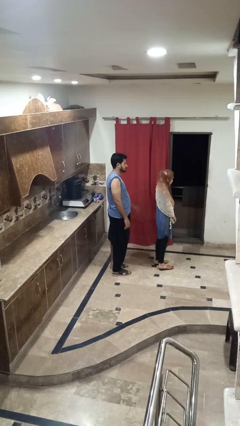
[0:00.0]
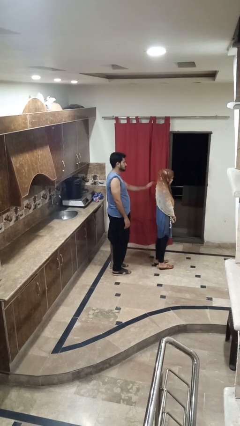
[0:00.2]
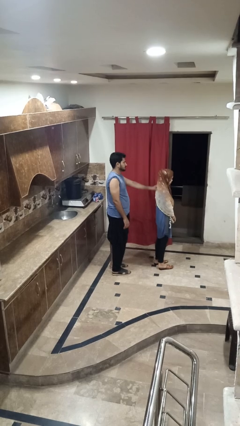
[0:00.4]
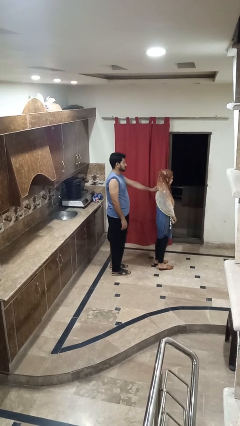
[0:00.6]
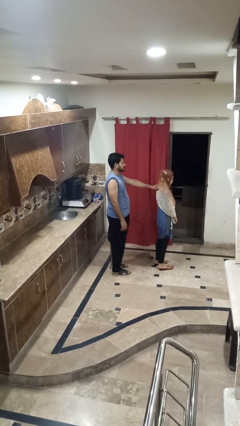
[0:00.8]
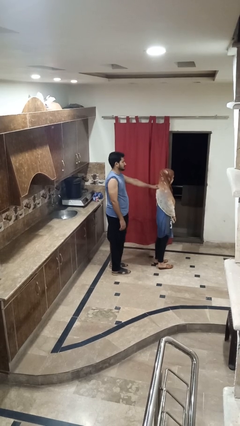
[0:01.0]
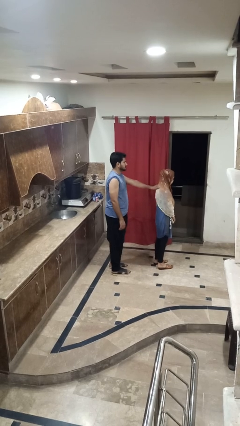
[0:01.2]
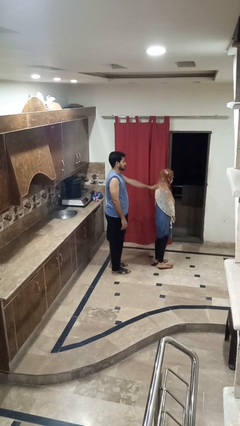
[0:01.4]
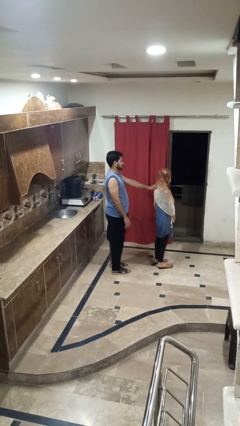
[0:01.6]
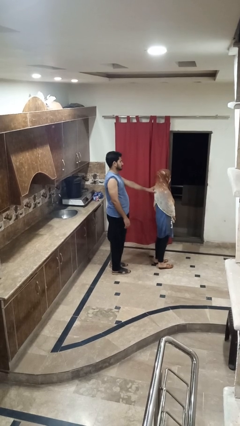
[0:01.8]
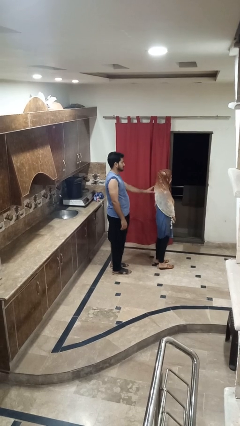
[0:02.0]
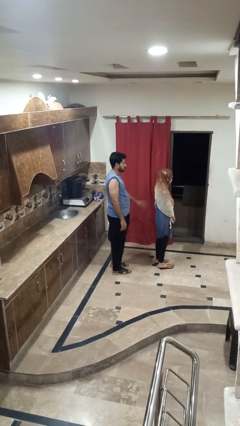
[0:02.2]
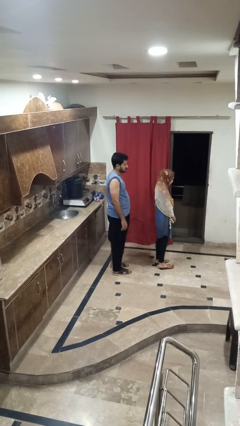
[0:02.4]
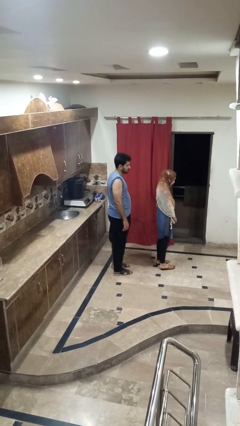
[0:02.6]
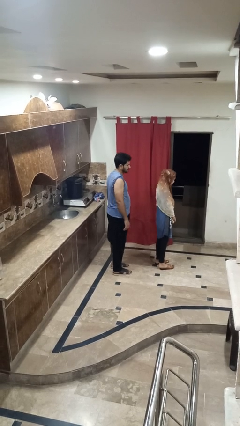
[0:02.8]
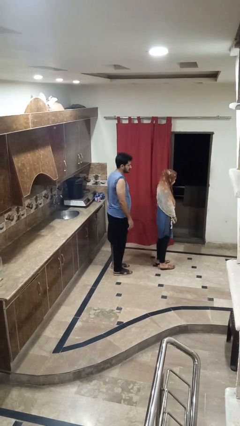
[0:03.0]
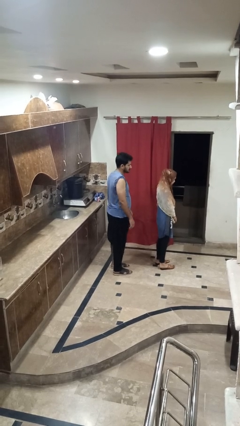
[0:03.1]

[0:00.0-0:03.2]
person touches back of person

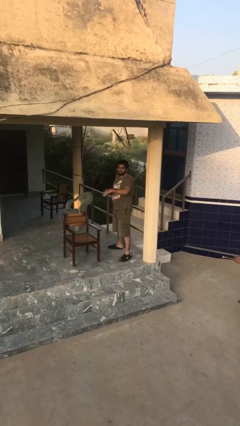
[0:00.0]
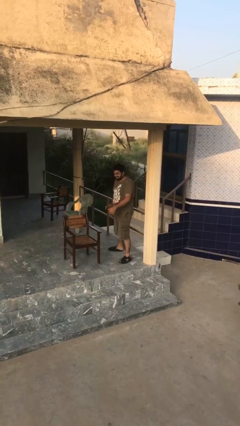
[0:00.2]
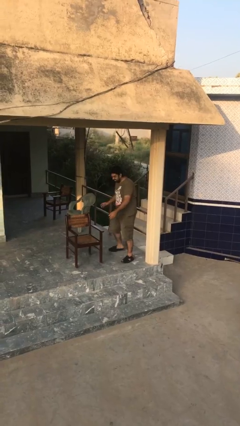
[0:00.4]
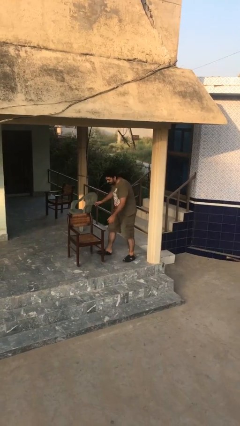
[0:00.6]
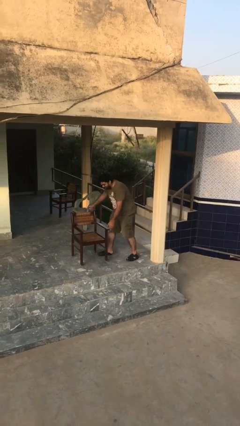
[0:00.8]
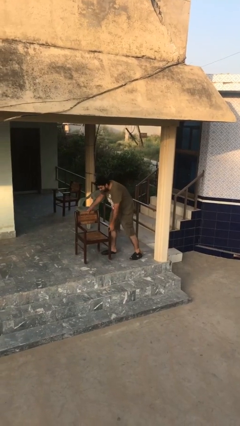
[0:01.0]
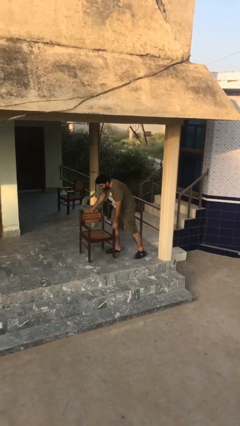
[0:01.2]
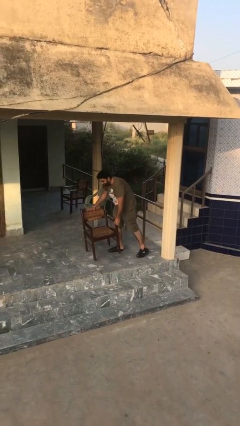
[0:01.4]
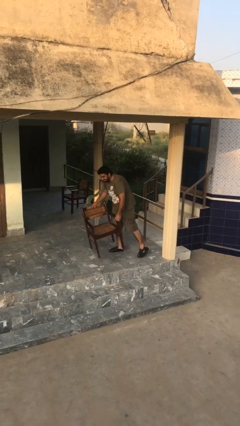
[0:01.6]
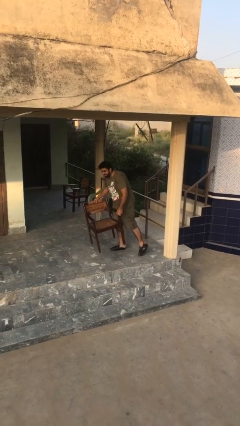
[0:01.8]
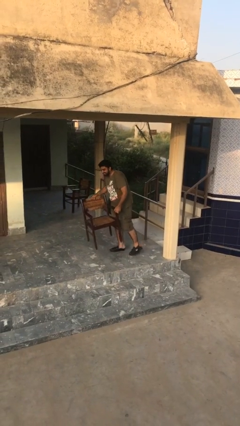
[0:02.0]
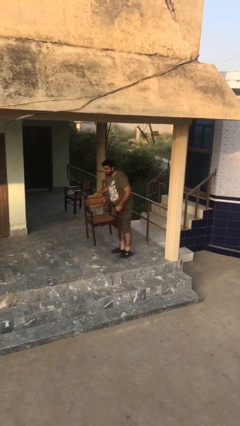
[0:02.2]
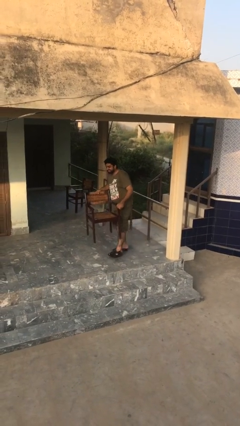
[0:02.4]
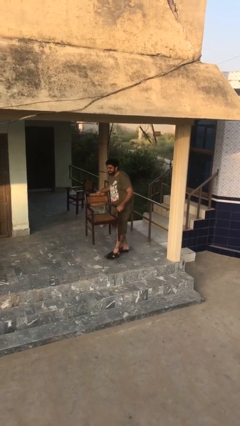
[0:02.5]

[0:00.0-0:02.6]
person picks up object from floor

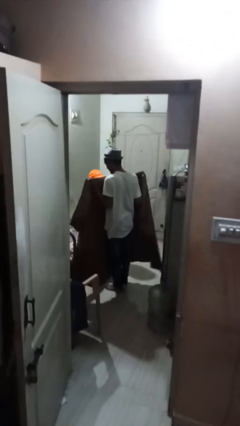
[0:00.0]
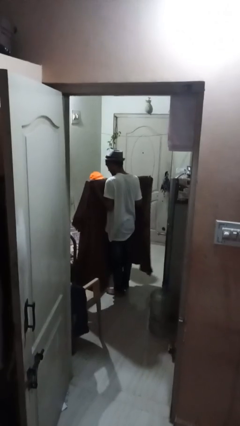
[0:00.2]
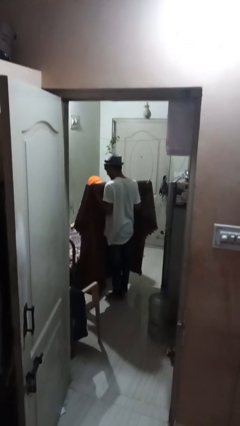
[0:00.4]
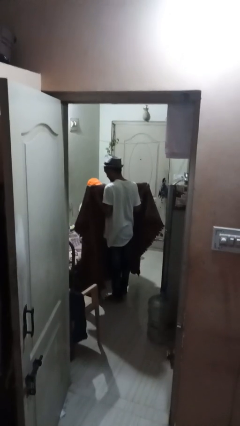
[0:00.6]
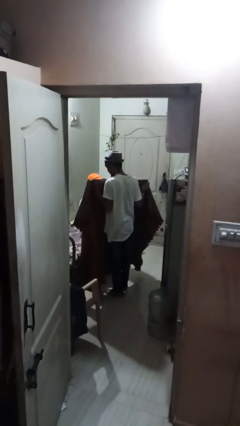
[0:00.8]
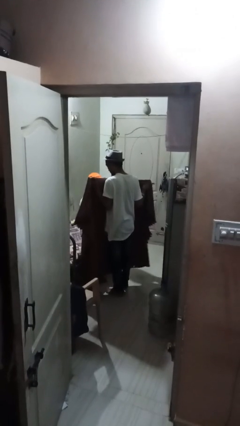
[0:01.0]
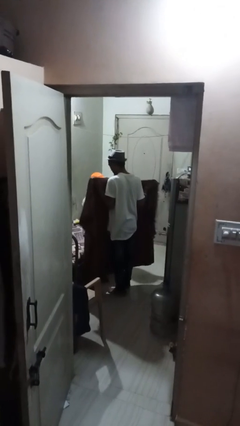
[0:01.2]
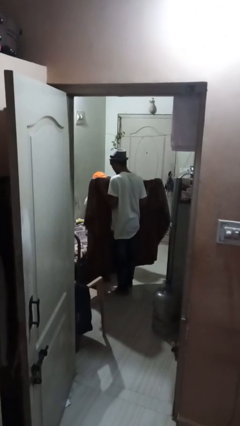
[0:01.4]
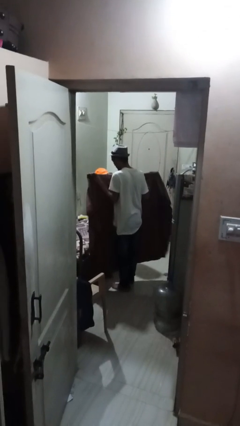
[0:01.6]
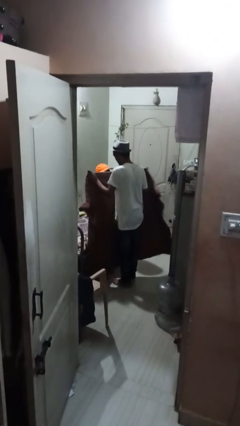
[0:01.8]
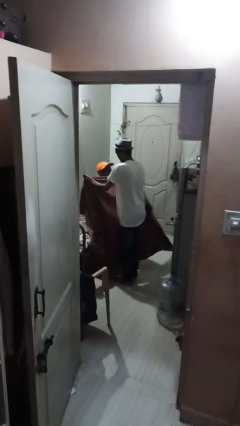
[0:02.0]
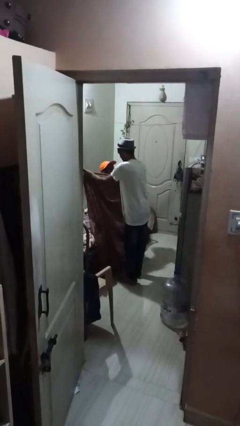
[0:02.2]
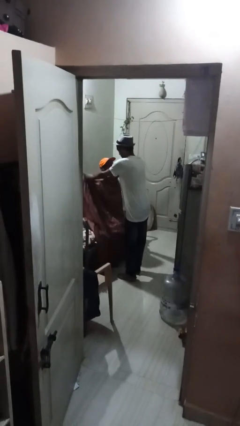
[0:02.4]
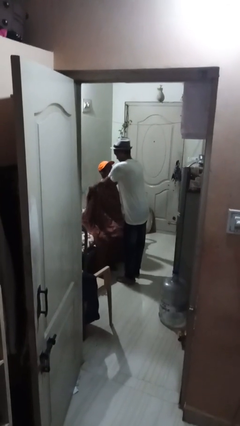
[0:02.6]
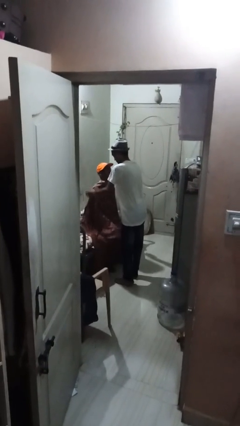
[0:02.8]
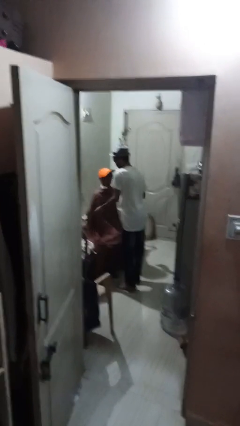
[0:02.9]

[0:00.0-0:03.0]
person uncovers friend with blanket

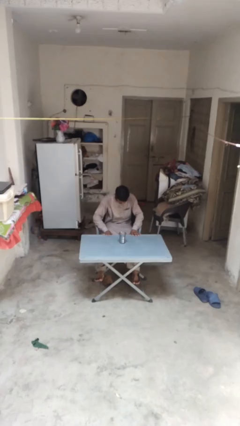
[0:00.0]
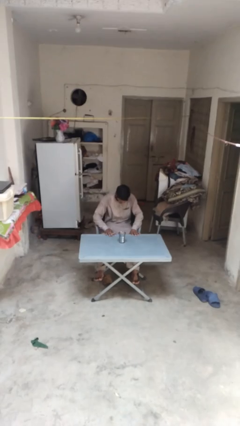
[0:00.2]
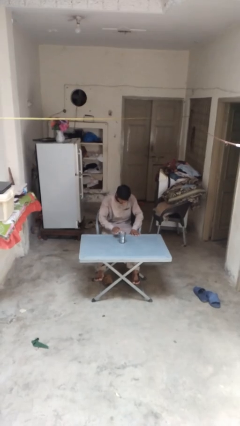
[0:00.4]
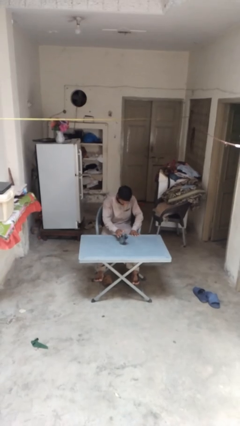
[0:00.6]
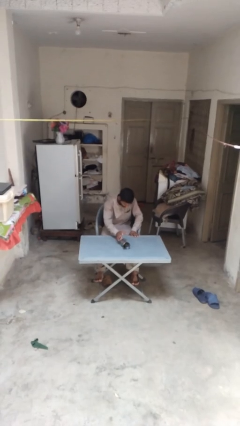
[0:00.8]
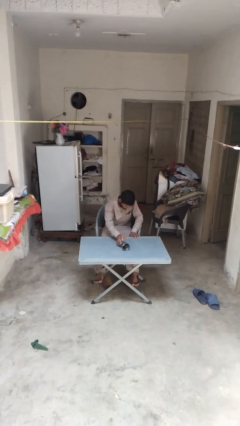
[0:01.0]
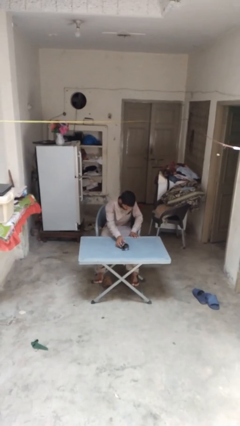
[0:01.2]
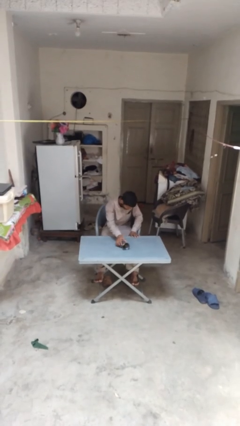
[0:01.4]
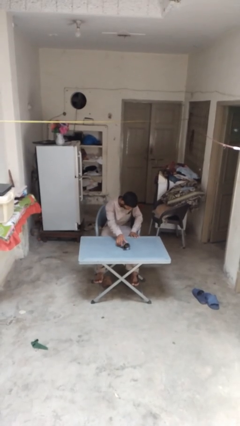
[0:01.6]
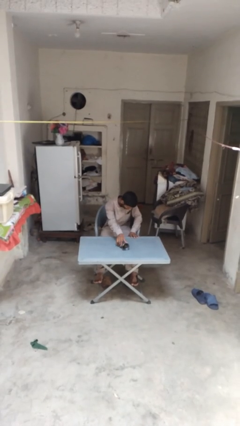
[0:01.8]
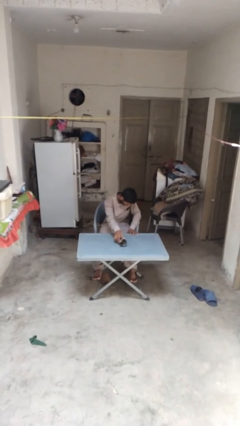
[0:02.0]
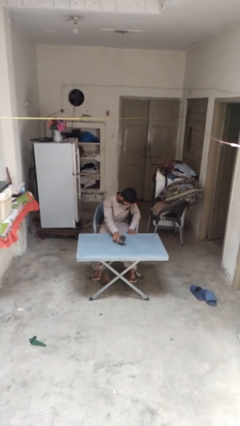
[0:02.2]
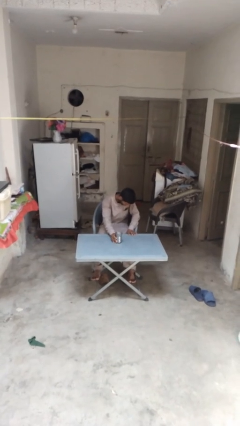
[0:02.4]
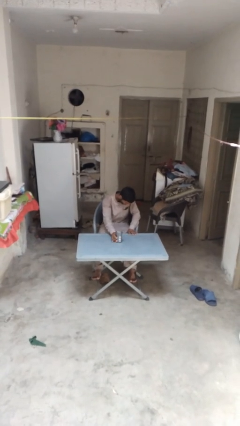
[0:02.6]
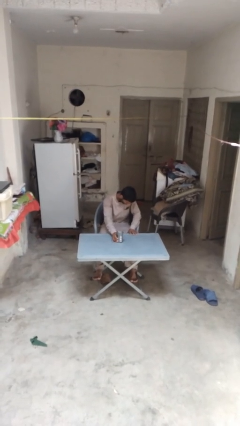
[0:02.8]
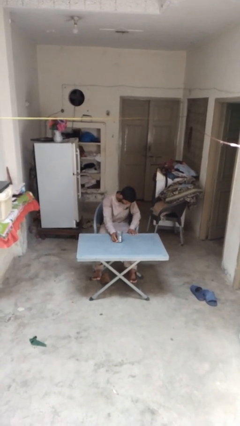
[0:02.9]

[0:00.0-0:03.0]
person knocks over glass

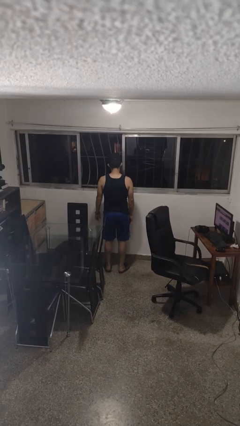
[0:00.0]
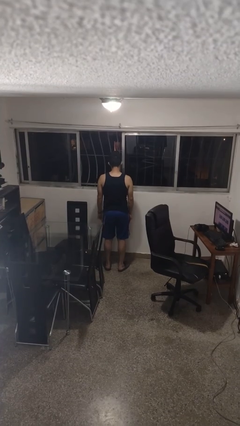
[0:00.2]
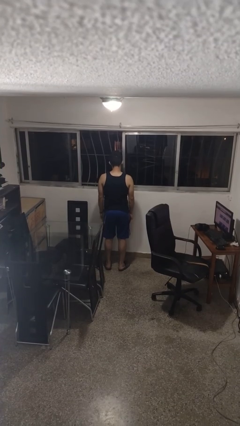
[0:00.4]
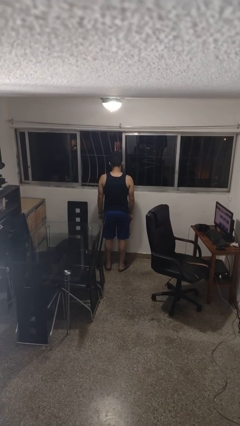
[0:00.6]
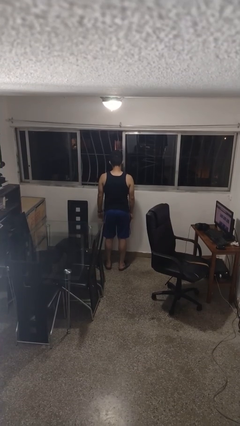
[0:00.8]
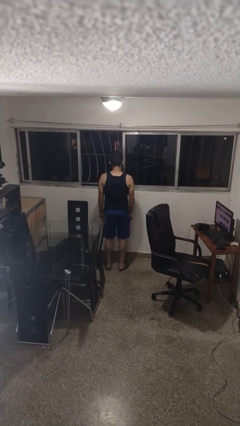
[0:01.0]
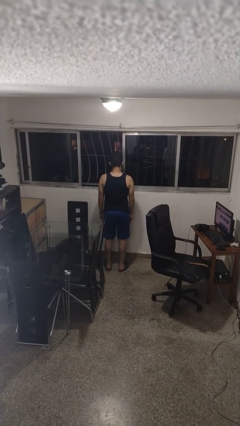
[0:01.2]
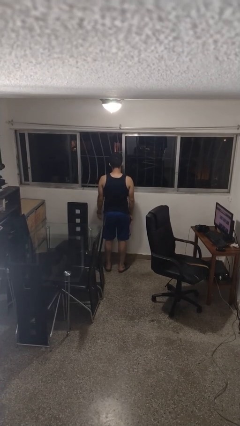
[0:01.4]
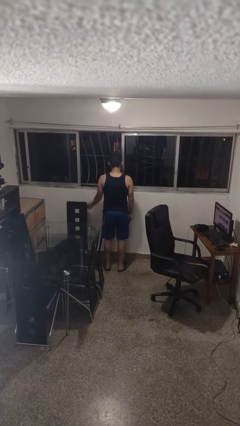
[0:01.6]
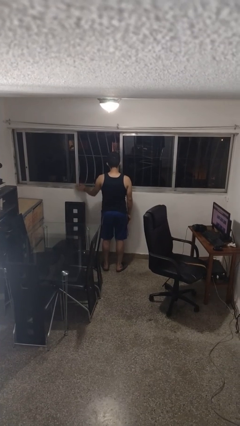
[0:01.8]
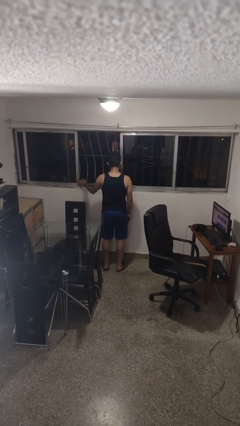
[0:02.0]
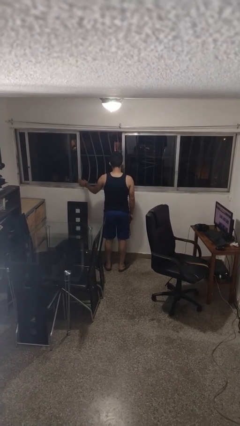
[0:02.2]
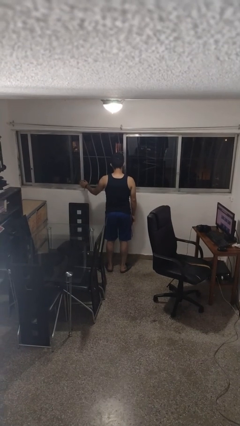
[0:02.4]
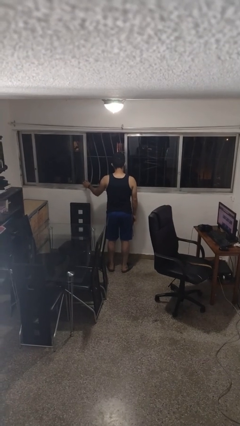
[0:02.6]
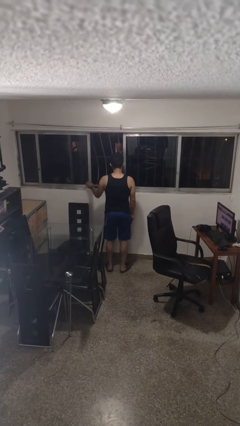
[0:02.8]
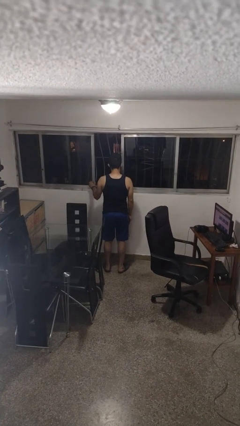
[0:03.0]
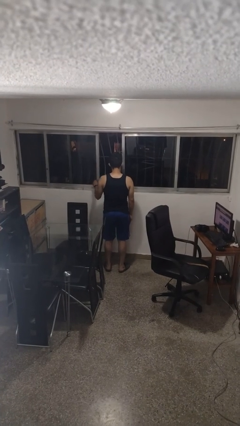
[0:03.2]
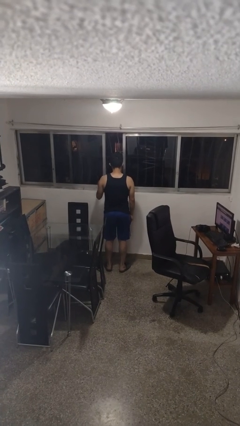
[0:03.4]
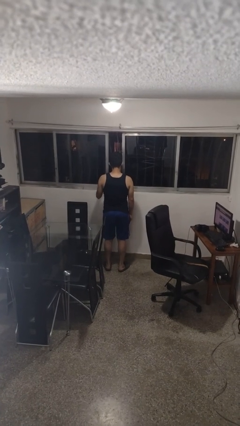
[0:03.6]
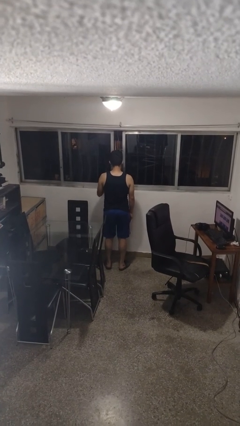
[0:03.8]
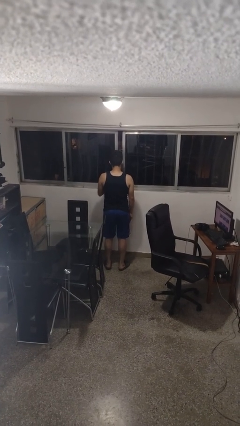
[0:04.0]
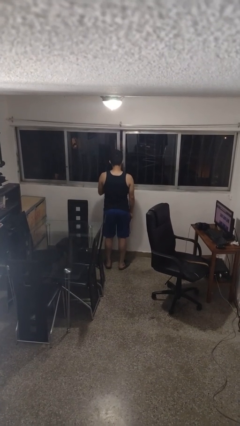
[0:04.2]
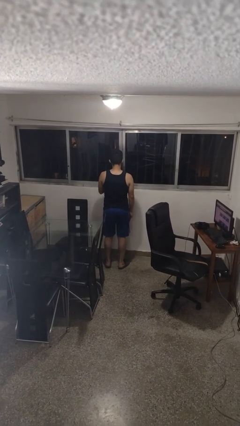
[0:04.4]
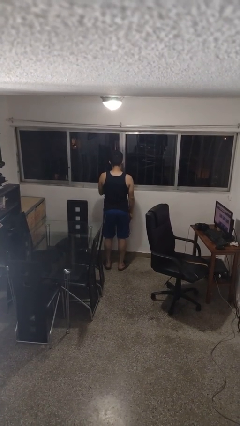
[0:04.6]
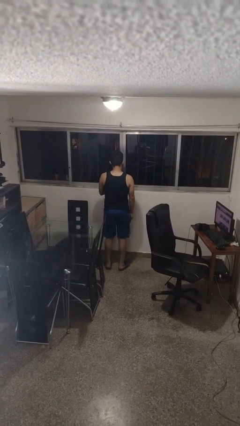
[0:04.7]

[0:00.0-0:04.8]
person closes home window

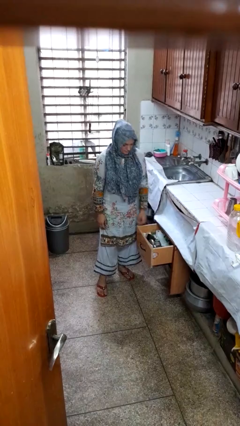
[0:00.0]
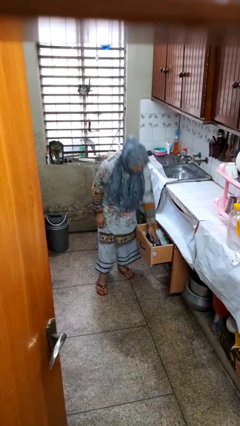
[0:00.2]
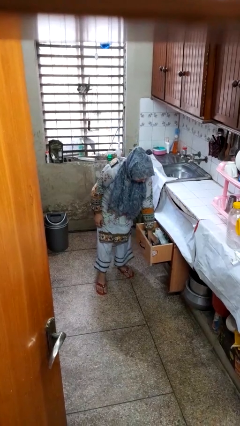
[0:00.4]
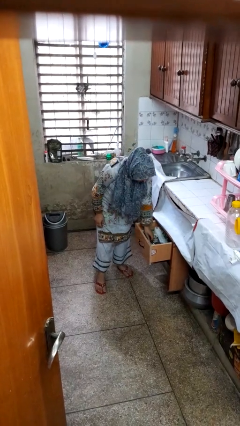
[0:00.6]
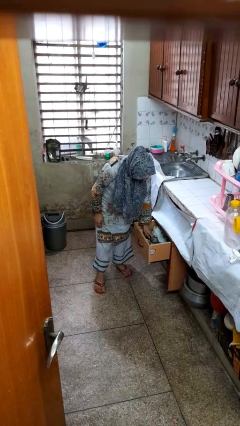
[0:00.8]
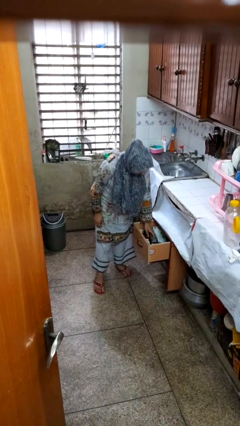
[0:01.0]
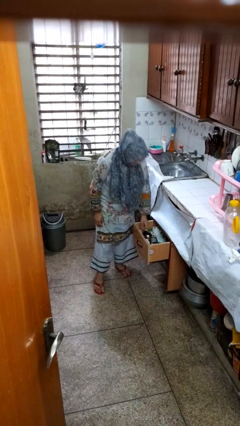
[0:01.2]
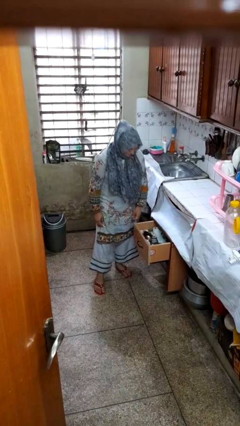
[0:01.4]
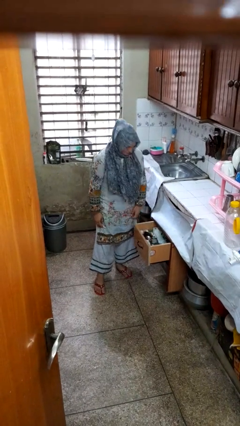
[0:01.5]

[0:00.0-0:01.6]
person searches in kitchen drawer
